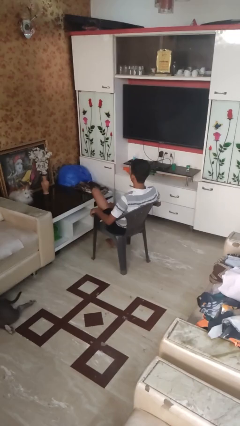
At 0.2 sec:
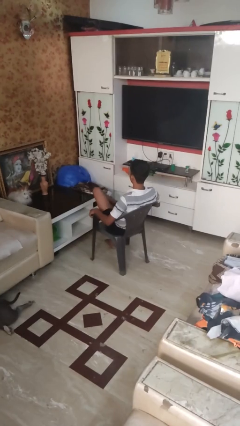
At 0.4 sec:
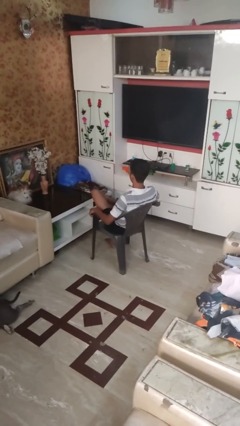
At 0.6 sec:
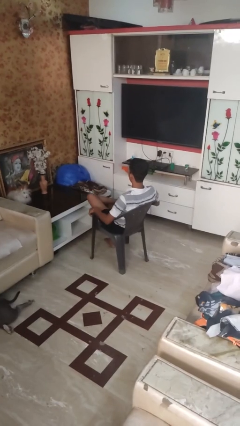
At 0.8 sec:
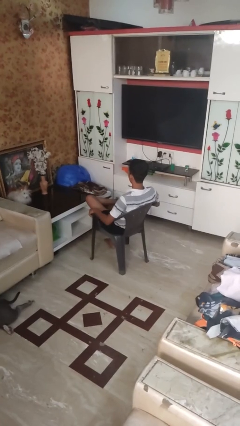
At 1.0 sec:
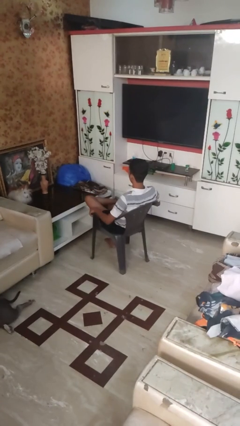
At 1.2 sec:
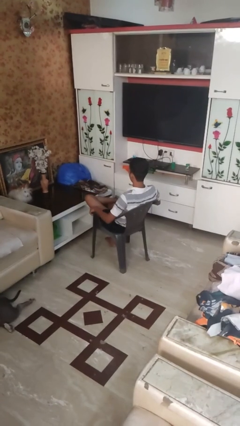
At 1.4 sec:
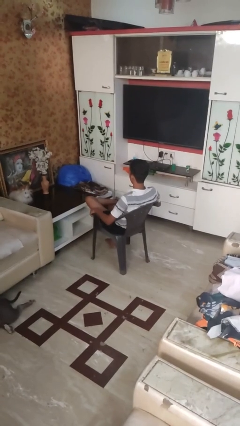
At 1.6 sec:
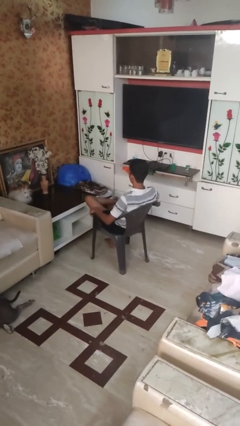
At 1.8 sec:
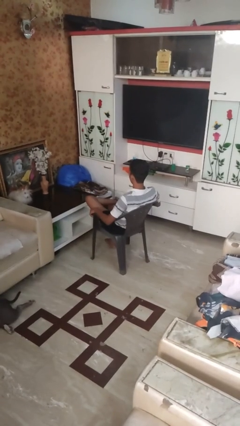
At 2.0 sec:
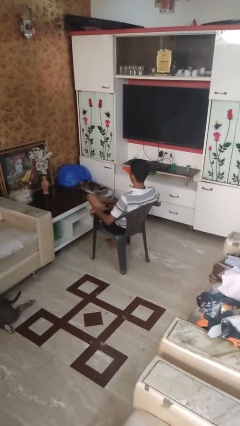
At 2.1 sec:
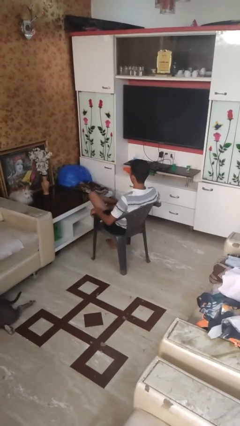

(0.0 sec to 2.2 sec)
person crosses legs

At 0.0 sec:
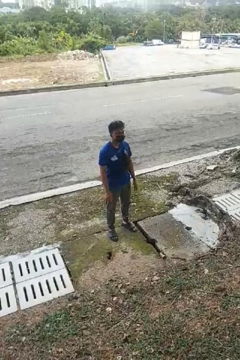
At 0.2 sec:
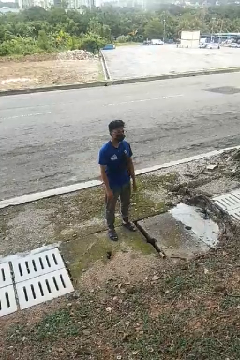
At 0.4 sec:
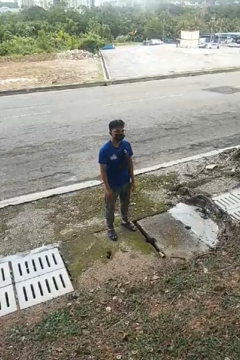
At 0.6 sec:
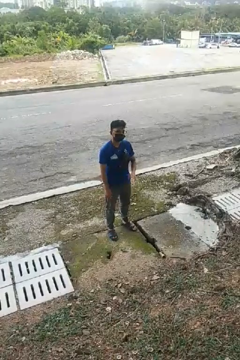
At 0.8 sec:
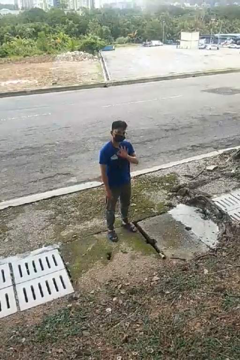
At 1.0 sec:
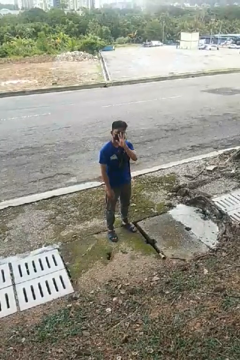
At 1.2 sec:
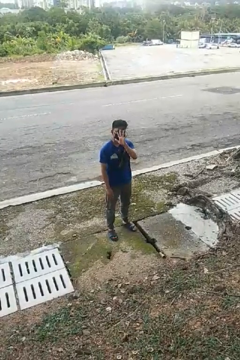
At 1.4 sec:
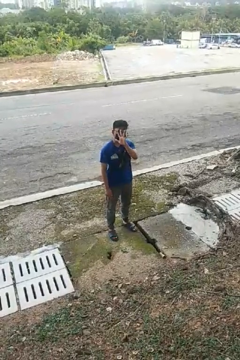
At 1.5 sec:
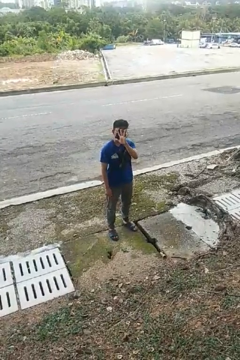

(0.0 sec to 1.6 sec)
person gestures number five

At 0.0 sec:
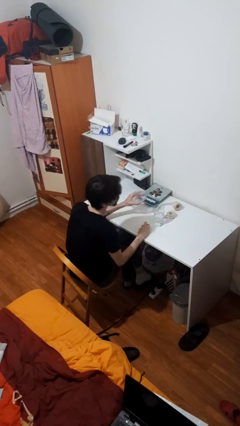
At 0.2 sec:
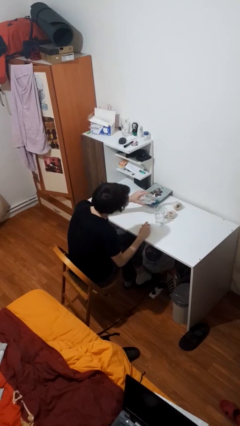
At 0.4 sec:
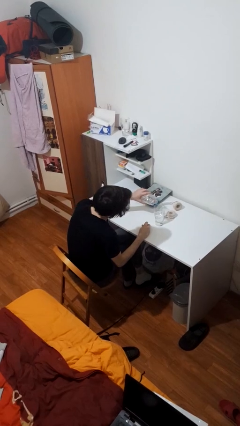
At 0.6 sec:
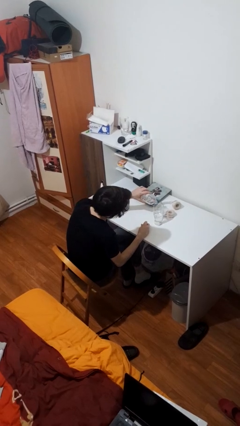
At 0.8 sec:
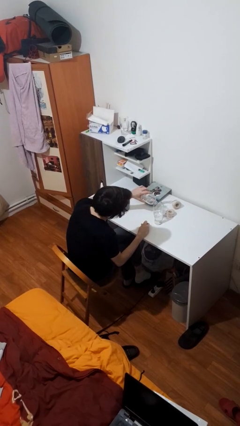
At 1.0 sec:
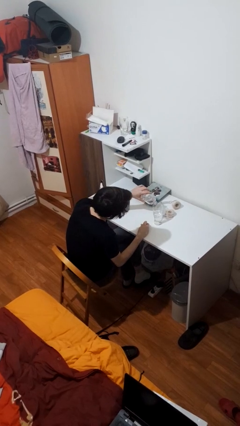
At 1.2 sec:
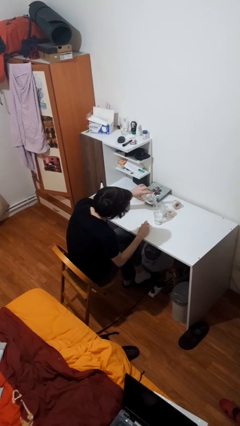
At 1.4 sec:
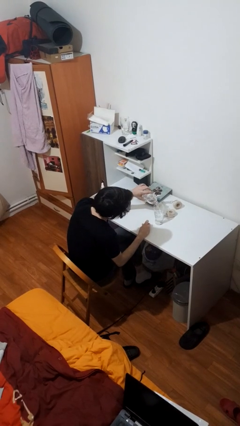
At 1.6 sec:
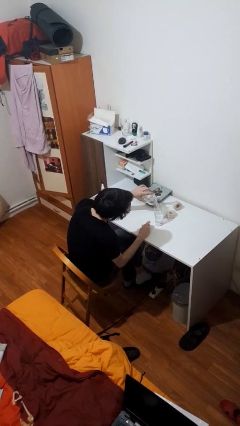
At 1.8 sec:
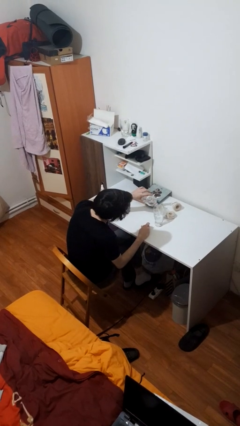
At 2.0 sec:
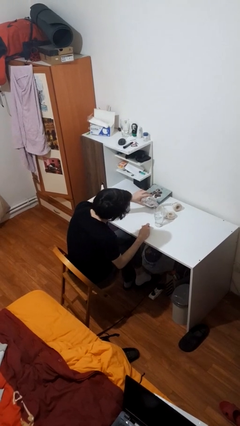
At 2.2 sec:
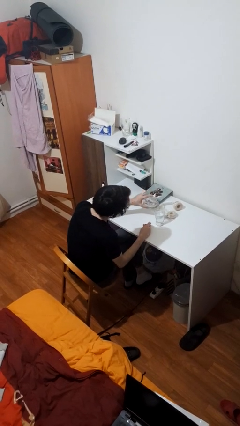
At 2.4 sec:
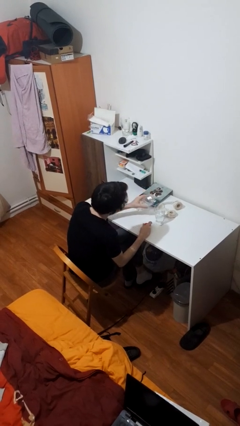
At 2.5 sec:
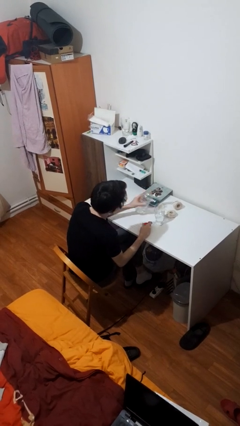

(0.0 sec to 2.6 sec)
person pours liquid into cup

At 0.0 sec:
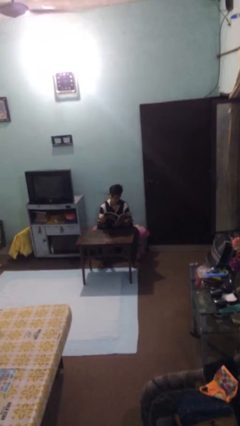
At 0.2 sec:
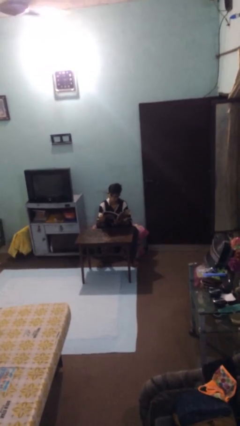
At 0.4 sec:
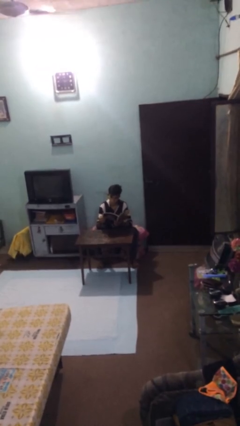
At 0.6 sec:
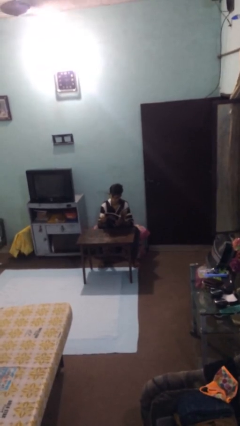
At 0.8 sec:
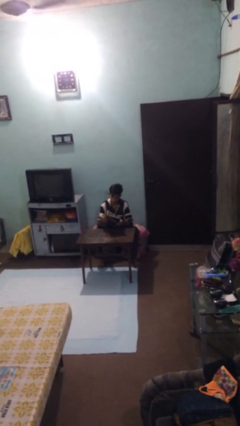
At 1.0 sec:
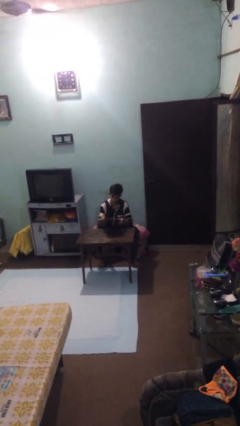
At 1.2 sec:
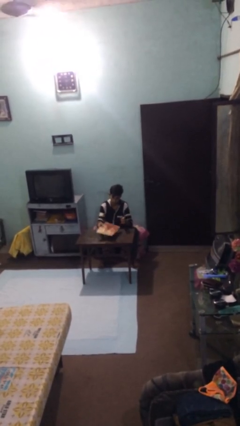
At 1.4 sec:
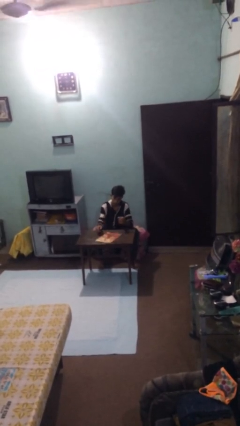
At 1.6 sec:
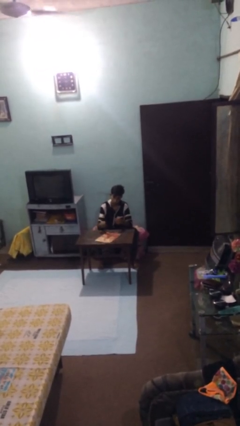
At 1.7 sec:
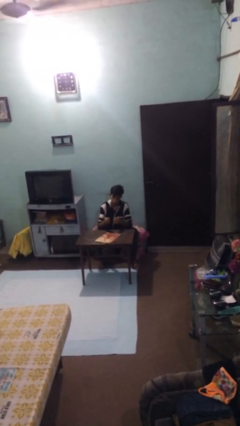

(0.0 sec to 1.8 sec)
person puts down object on table

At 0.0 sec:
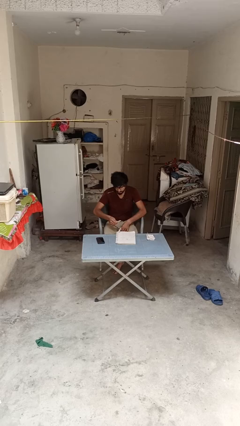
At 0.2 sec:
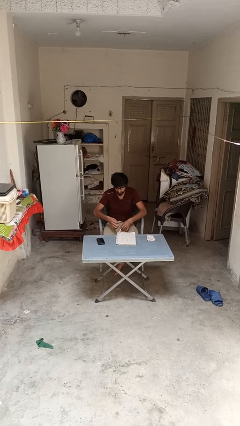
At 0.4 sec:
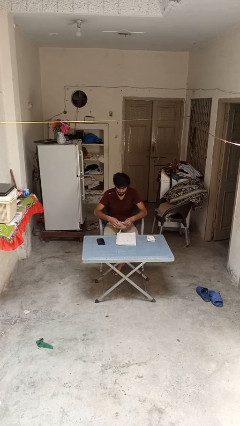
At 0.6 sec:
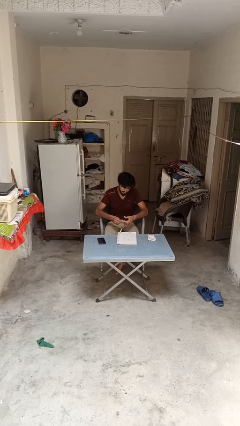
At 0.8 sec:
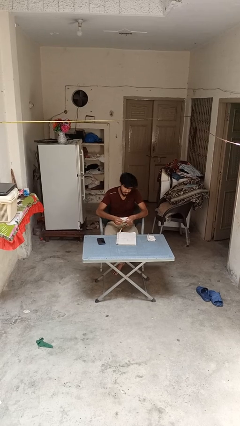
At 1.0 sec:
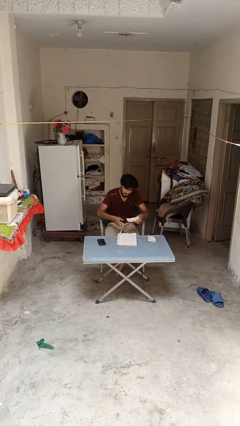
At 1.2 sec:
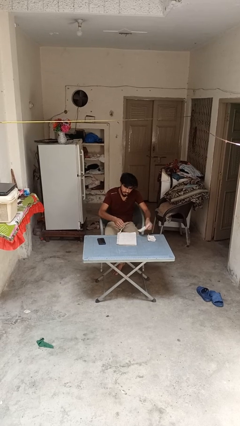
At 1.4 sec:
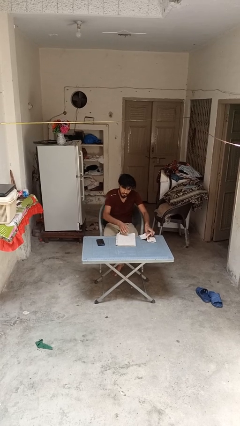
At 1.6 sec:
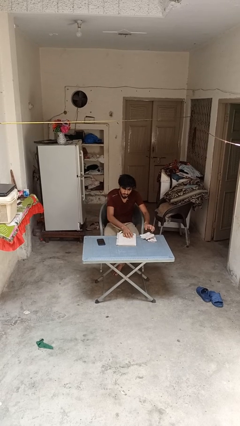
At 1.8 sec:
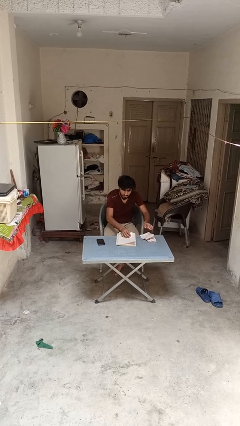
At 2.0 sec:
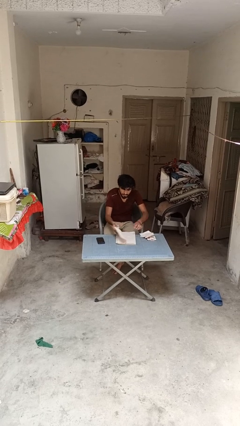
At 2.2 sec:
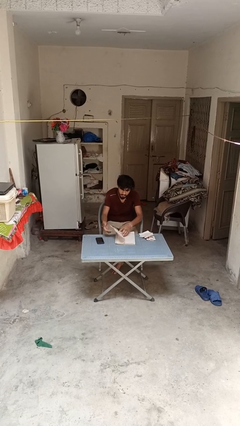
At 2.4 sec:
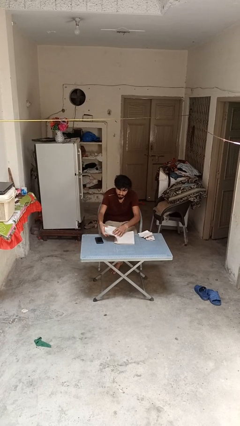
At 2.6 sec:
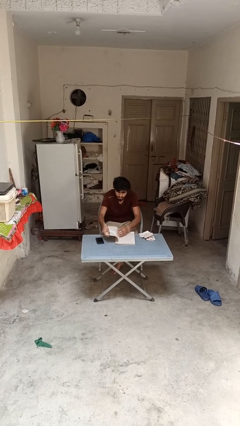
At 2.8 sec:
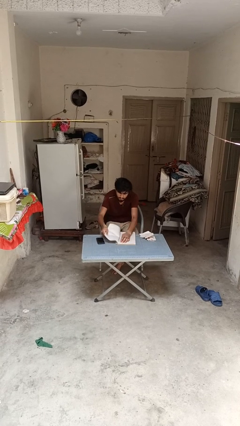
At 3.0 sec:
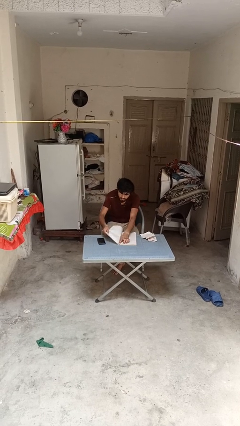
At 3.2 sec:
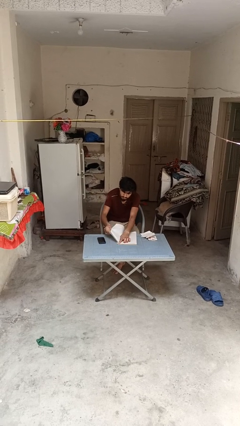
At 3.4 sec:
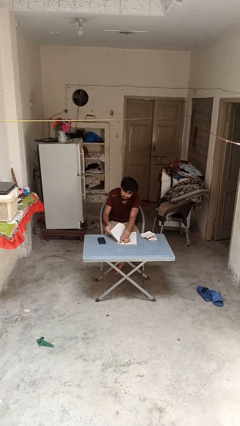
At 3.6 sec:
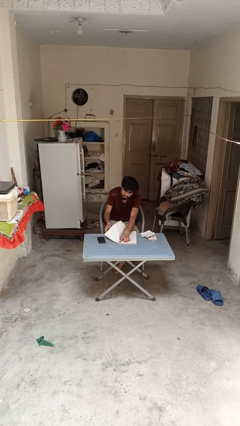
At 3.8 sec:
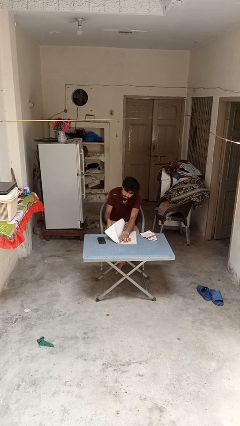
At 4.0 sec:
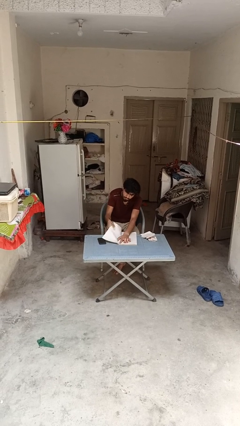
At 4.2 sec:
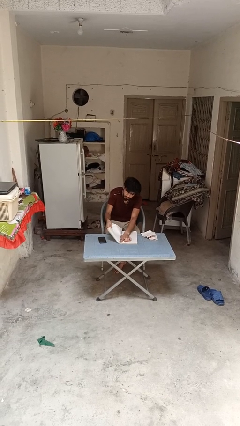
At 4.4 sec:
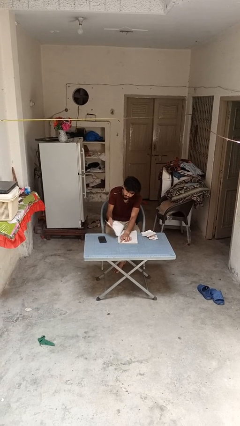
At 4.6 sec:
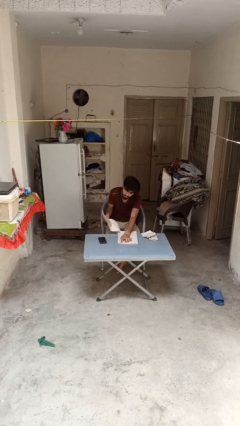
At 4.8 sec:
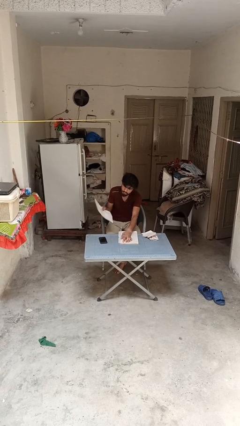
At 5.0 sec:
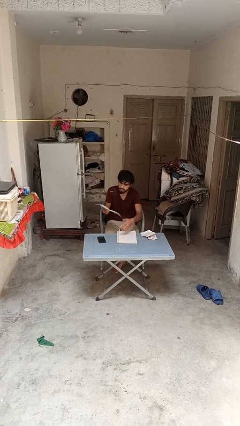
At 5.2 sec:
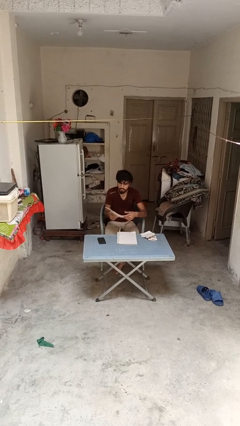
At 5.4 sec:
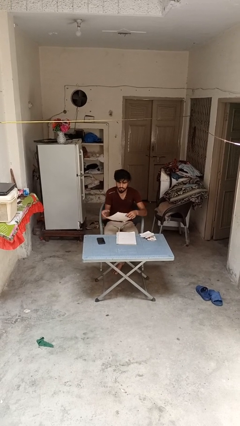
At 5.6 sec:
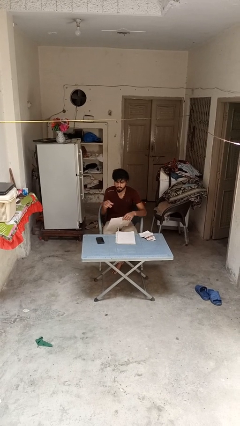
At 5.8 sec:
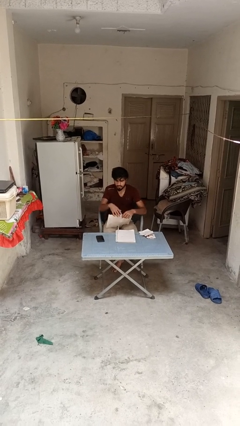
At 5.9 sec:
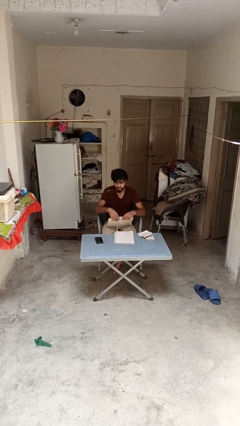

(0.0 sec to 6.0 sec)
person tears paper

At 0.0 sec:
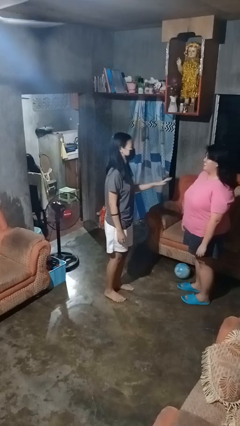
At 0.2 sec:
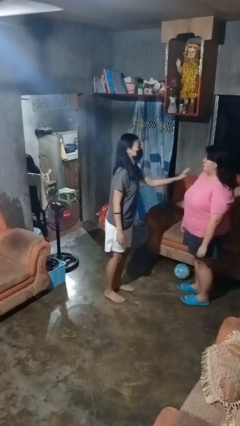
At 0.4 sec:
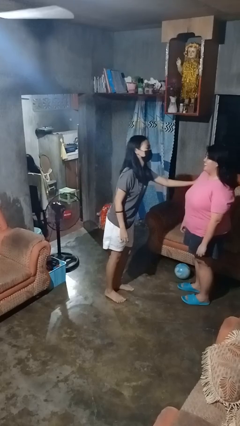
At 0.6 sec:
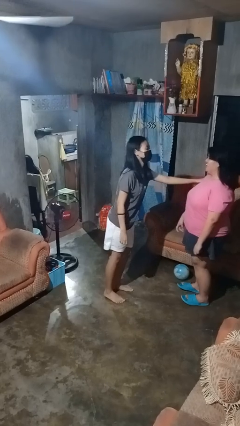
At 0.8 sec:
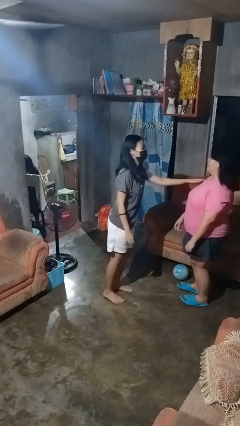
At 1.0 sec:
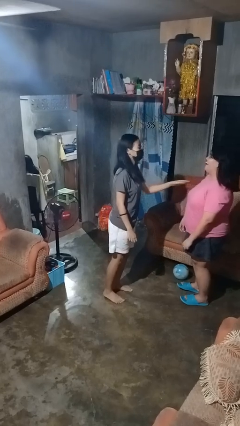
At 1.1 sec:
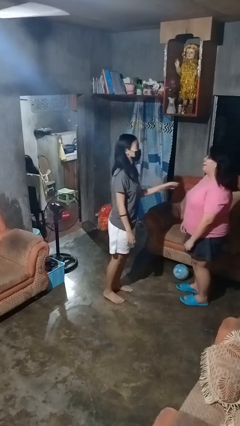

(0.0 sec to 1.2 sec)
person shoves person

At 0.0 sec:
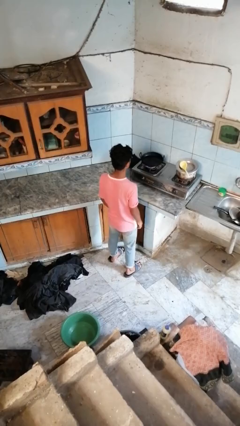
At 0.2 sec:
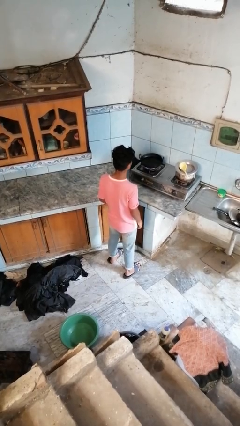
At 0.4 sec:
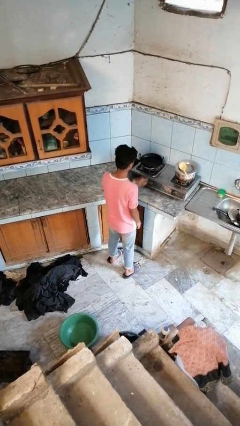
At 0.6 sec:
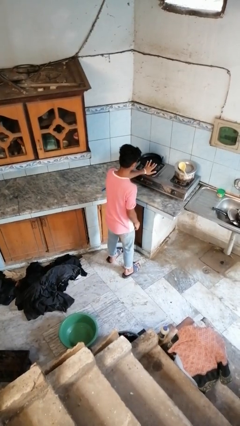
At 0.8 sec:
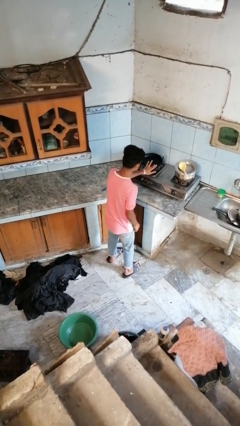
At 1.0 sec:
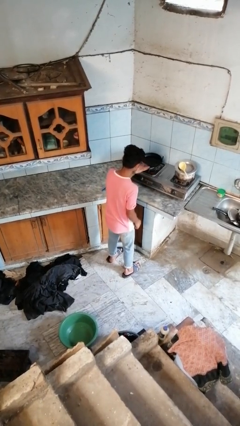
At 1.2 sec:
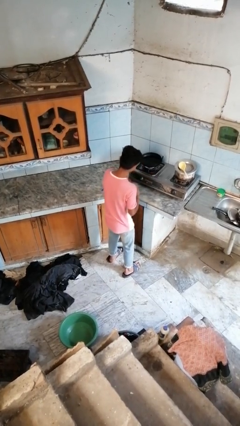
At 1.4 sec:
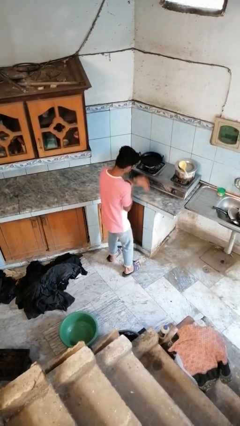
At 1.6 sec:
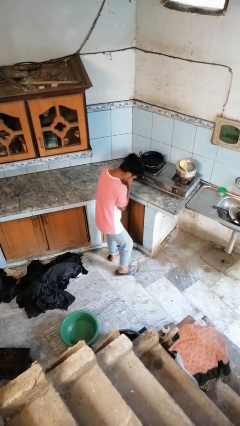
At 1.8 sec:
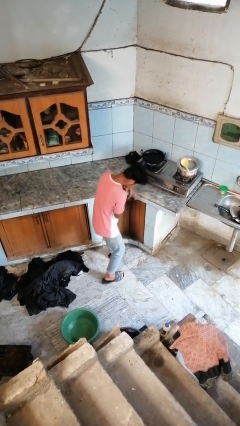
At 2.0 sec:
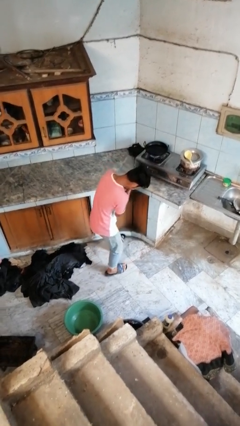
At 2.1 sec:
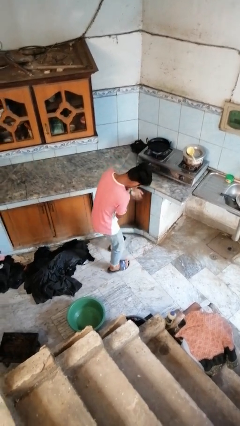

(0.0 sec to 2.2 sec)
person burns hand
